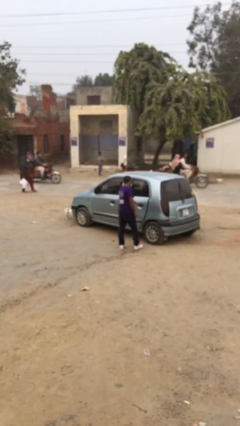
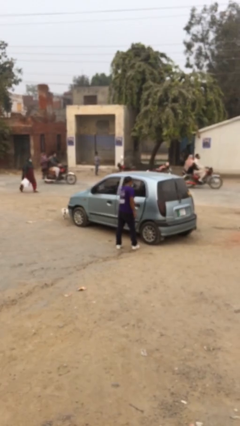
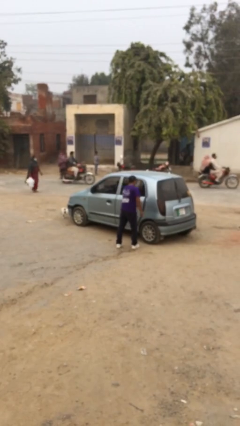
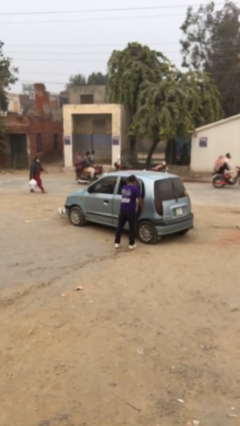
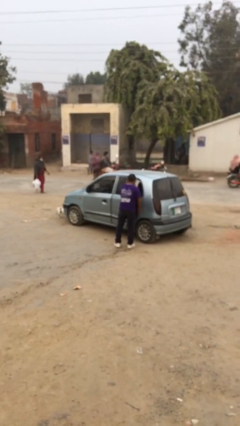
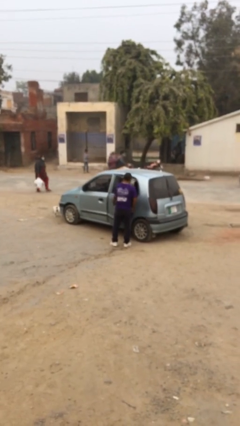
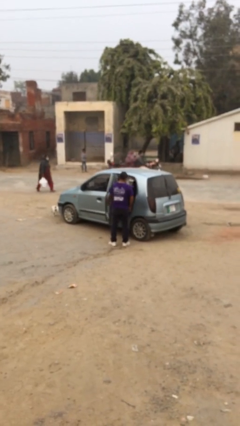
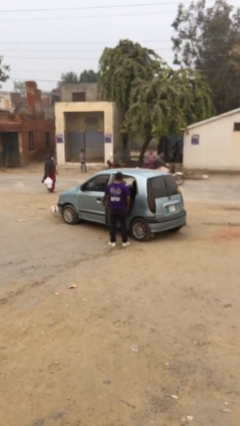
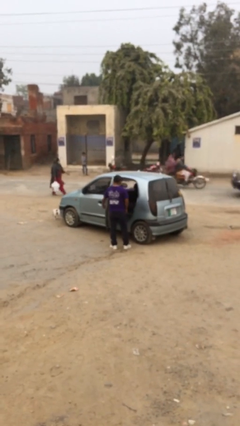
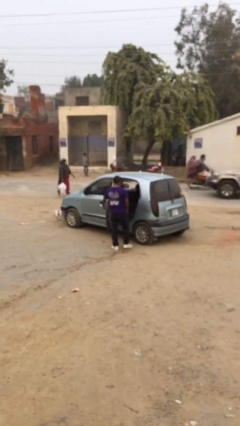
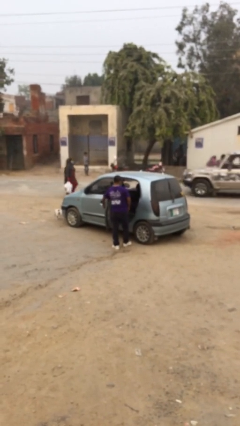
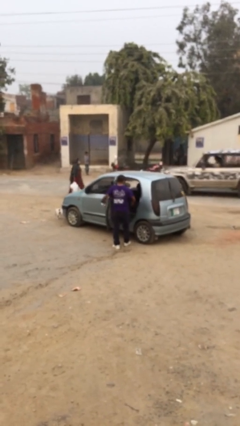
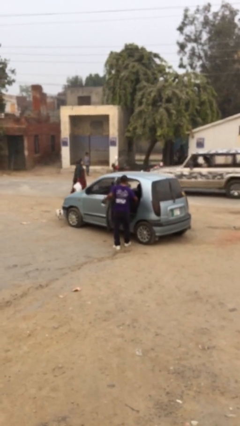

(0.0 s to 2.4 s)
person opens car door

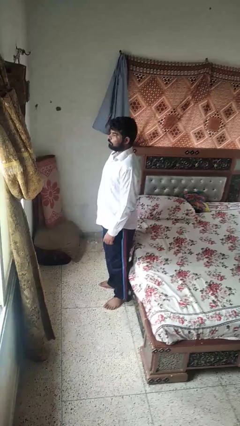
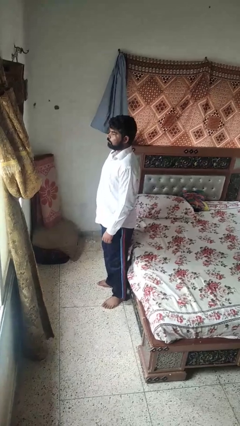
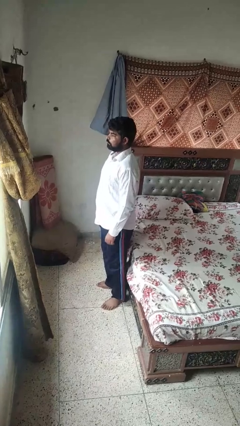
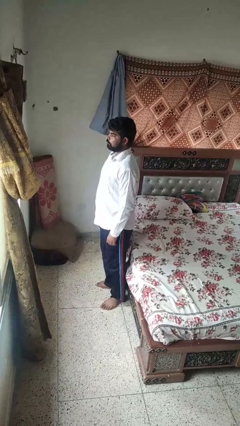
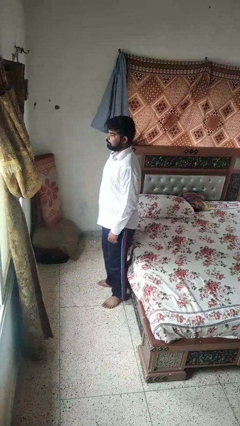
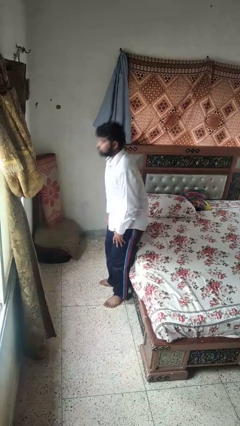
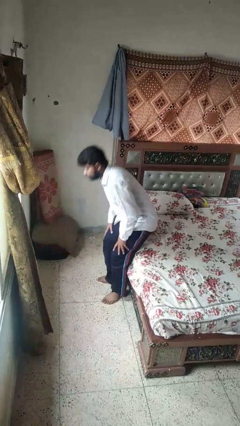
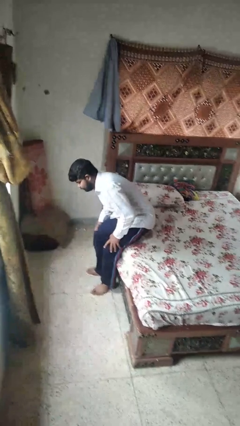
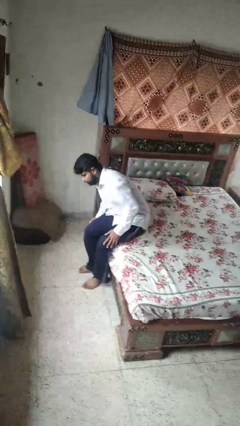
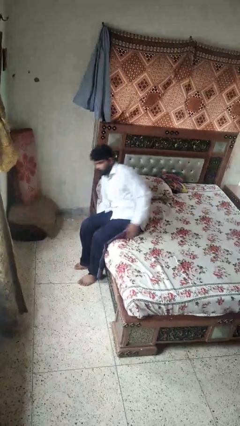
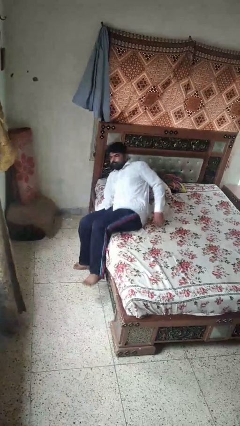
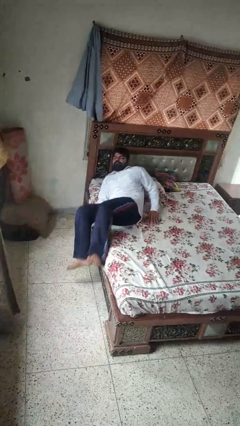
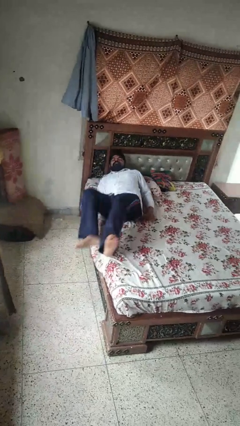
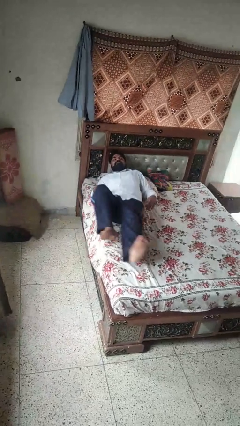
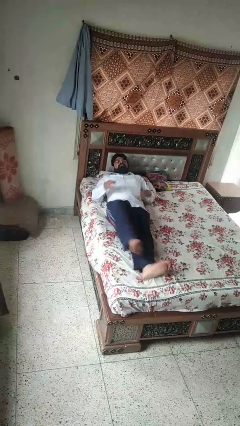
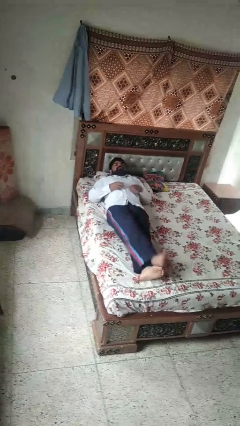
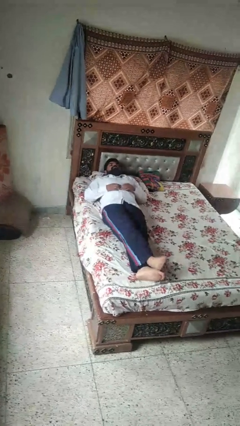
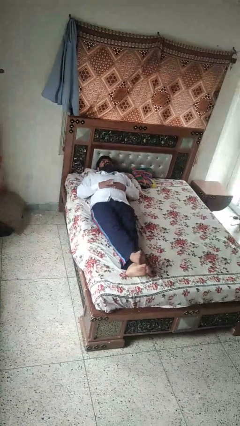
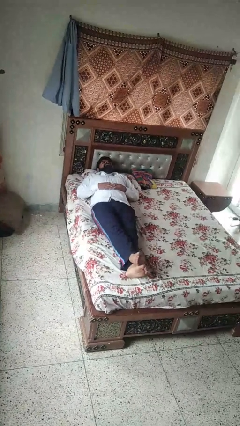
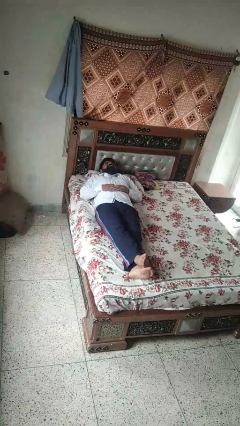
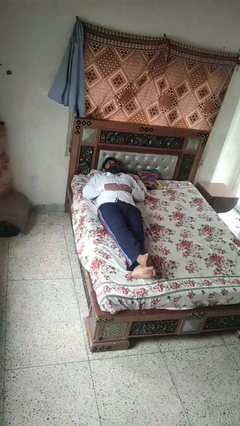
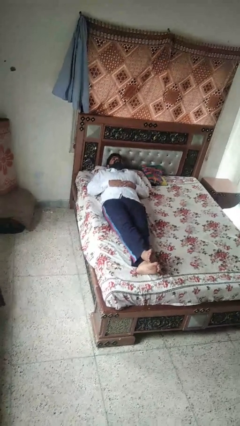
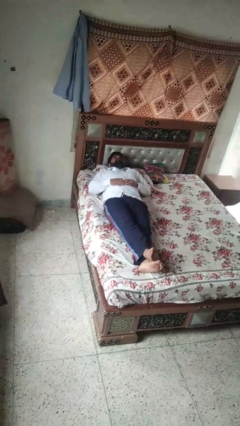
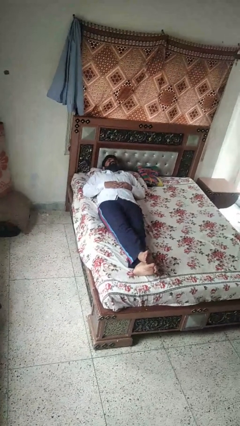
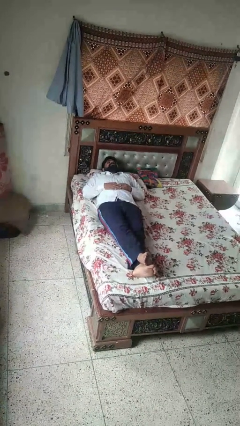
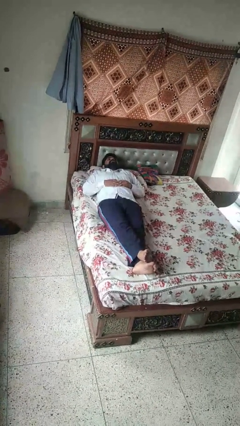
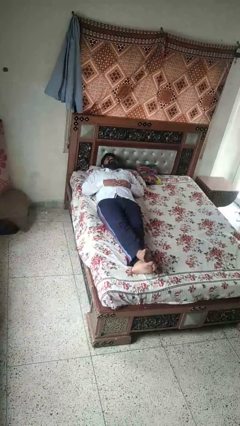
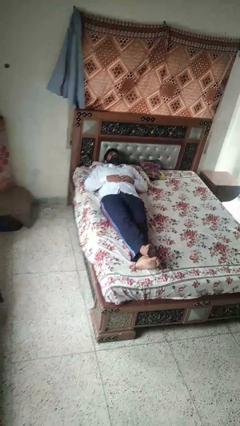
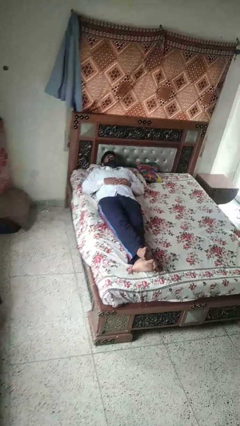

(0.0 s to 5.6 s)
person lies down on bed

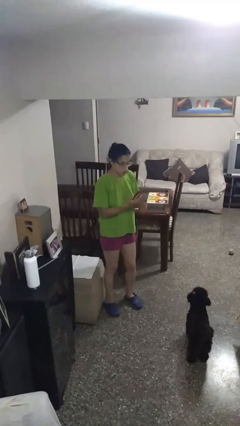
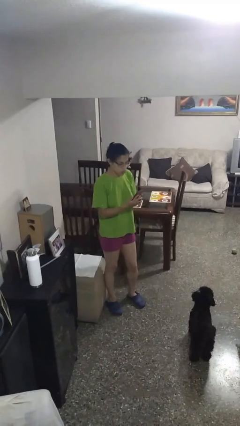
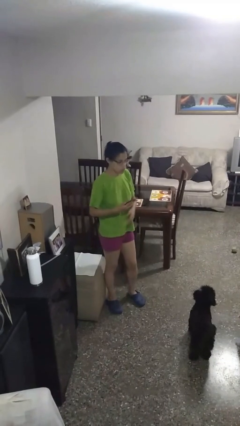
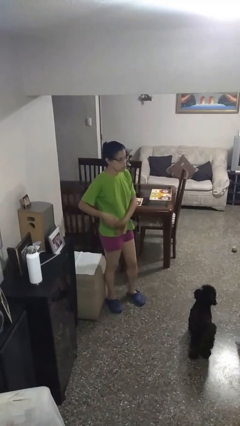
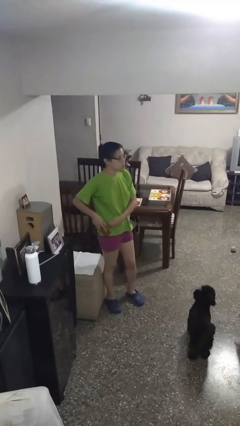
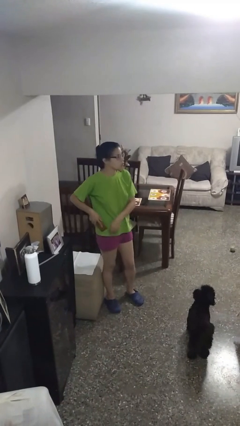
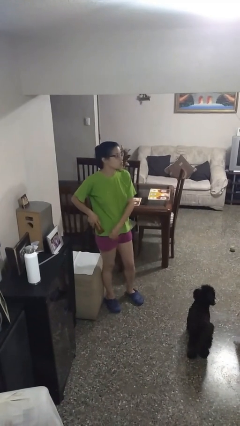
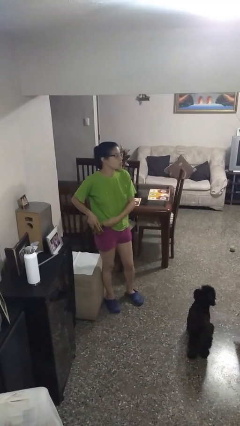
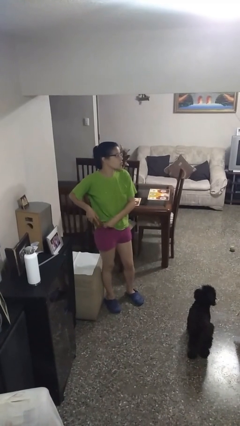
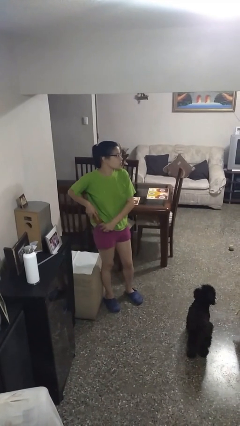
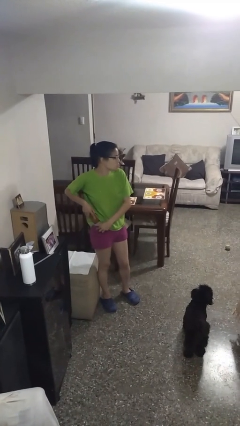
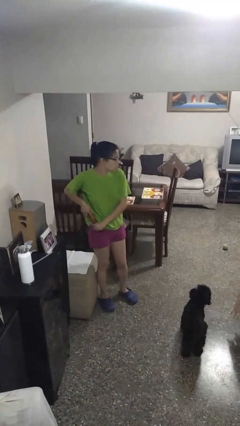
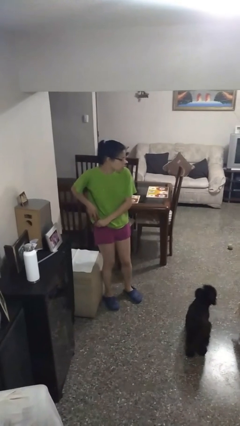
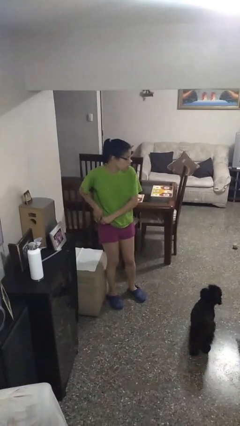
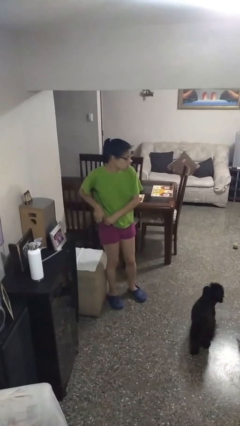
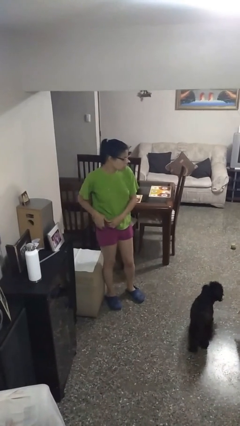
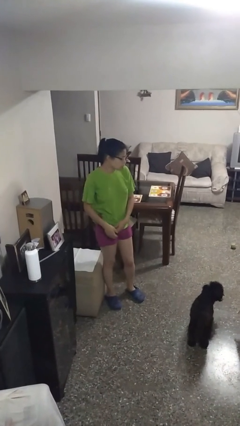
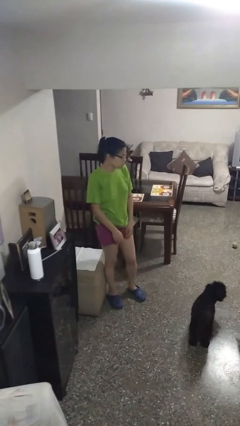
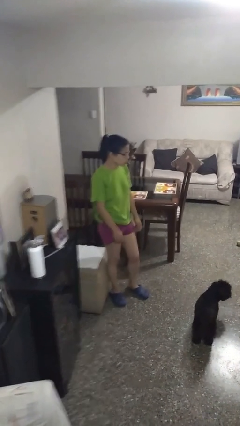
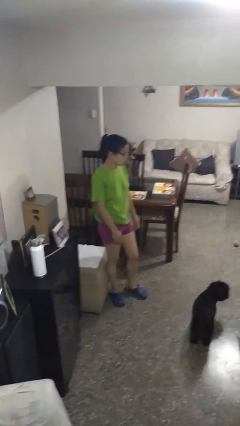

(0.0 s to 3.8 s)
person puts phone into pocket

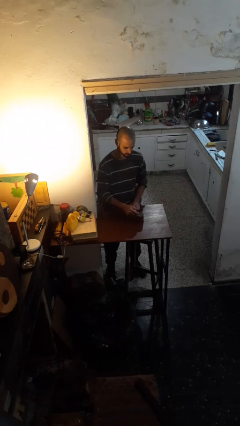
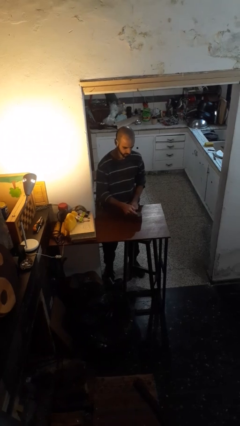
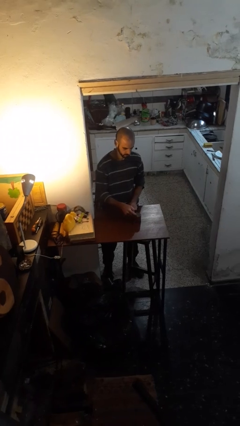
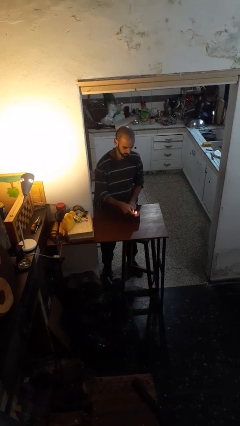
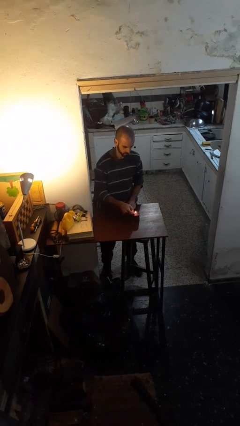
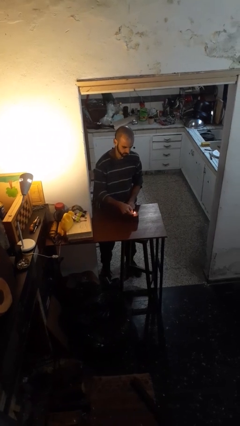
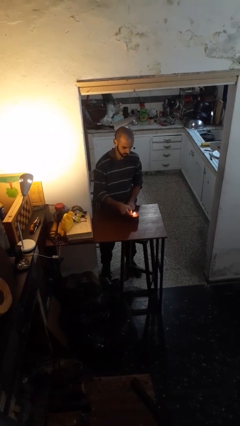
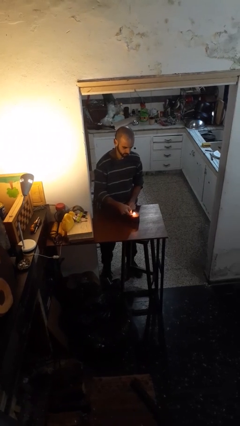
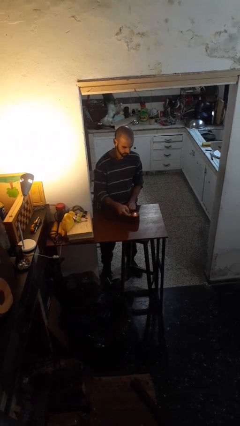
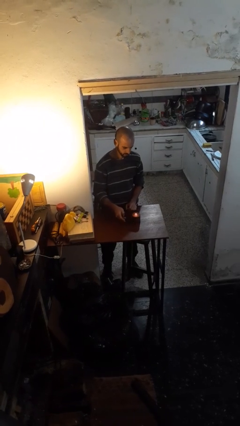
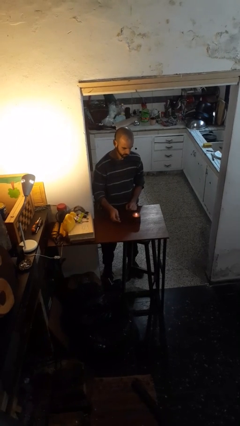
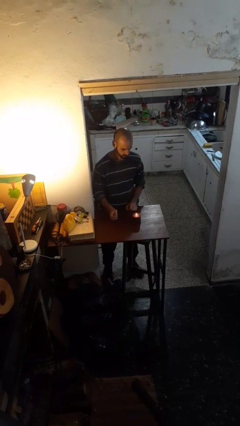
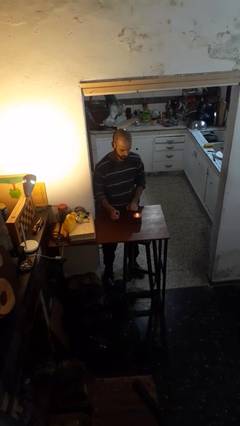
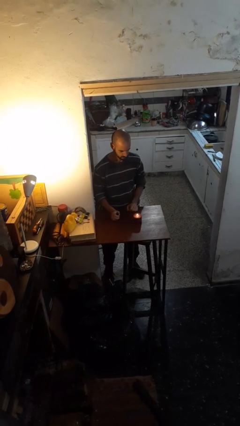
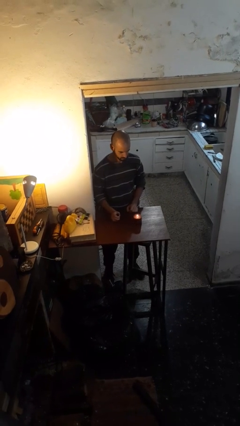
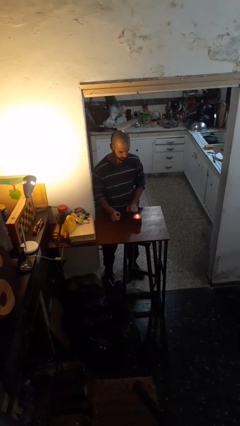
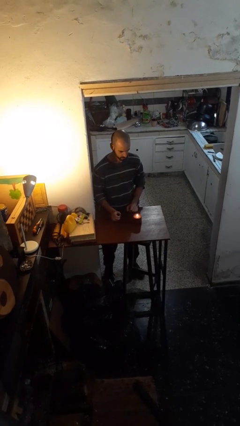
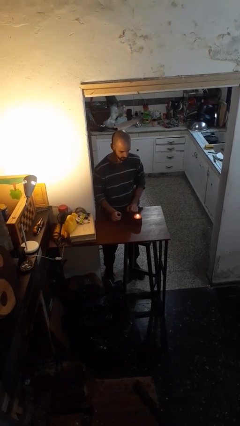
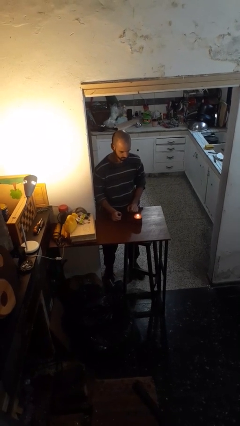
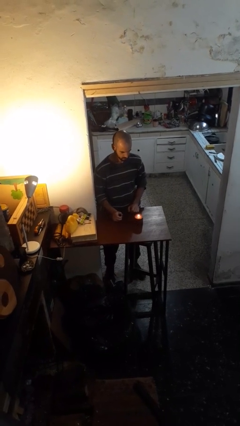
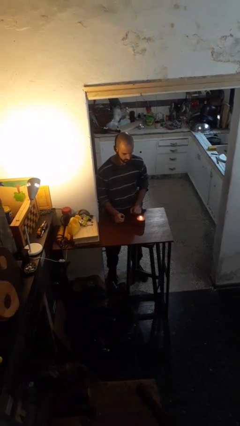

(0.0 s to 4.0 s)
person lights candle

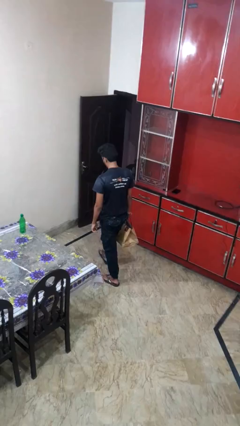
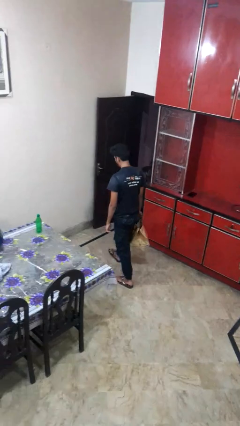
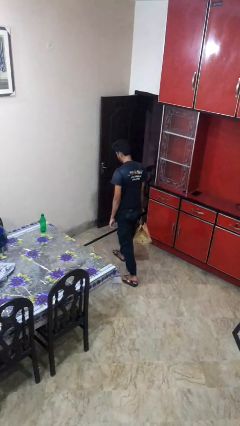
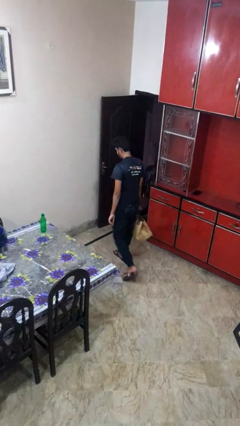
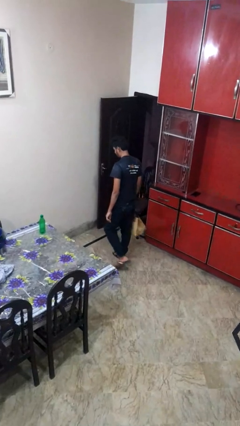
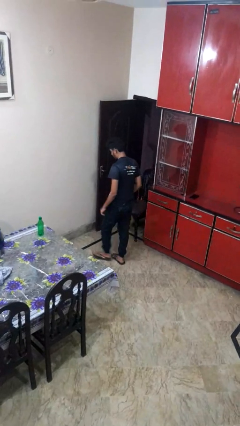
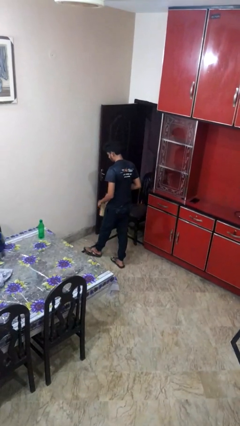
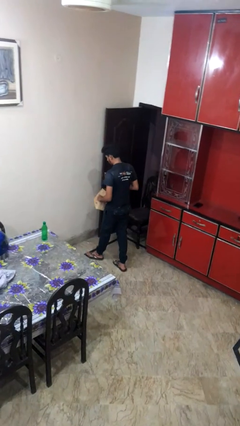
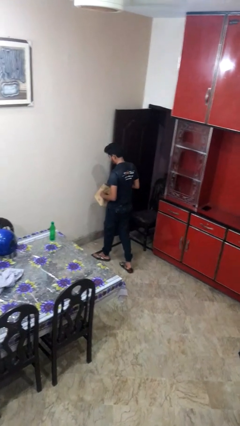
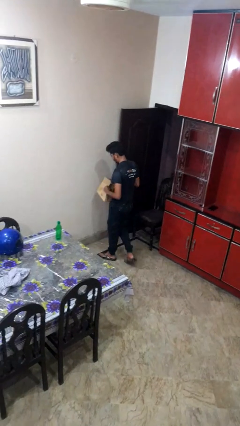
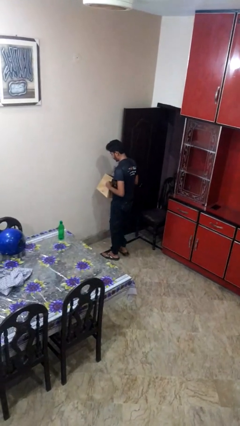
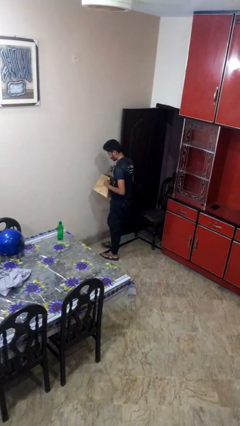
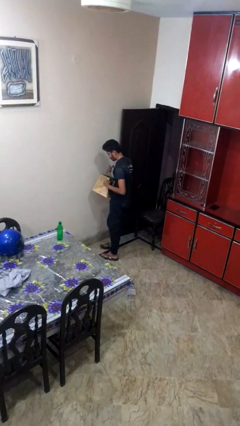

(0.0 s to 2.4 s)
person carries groceries
